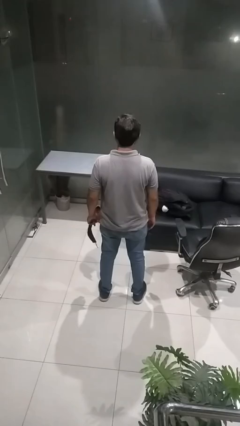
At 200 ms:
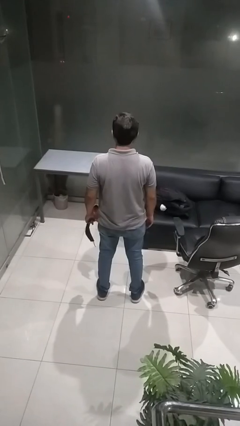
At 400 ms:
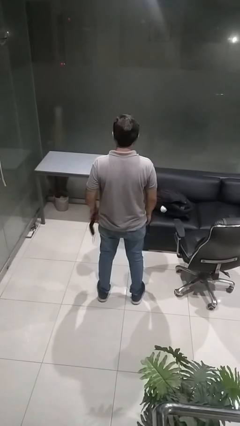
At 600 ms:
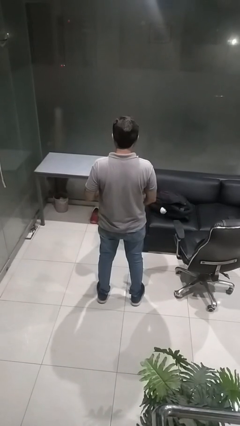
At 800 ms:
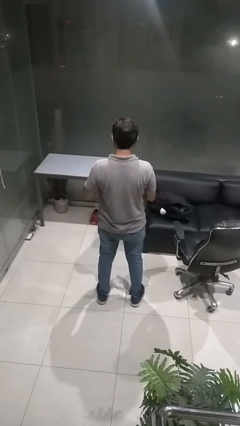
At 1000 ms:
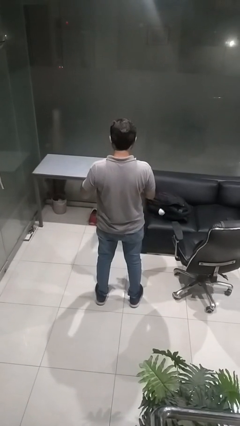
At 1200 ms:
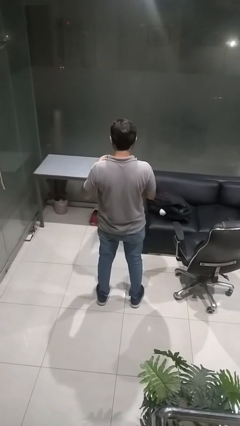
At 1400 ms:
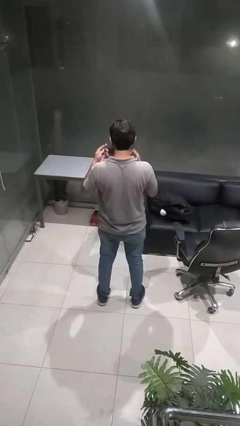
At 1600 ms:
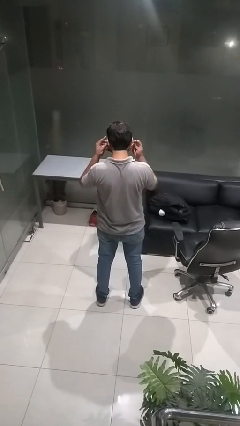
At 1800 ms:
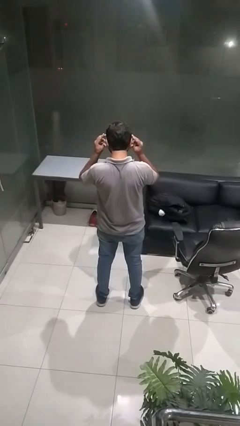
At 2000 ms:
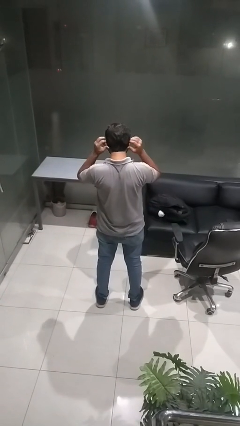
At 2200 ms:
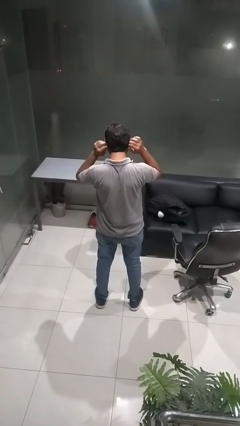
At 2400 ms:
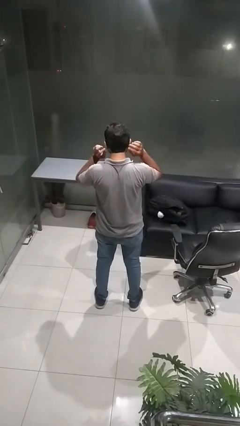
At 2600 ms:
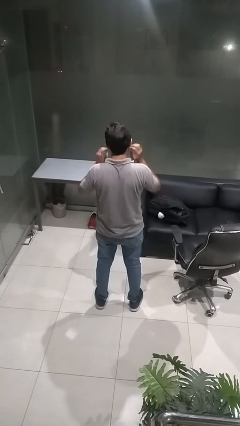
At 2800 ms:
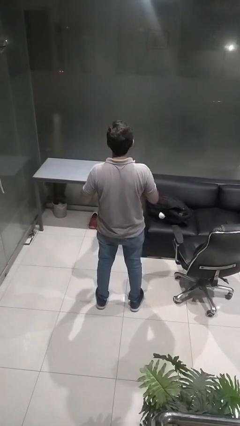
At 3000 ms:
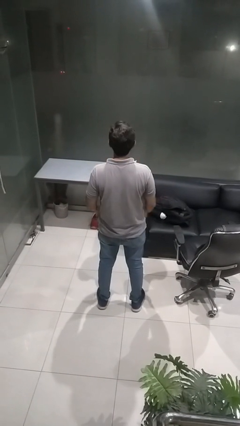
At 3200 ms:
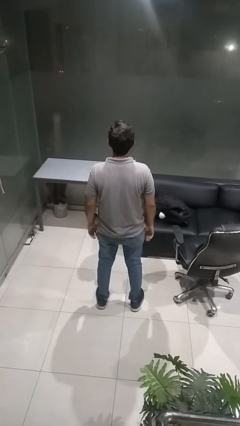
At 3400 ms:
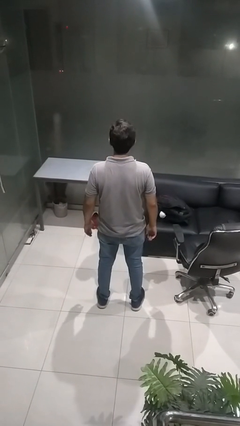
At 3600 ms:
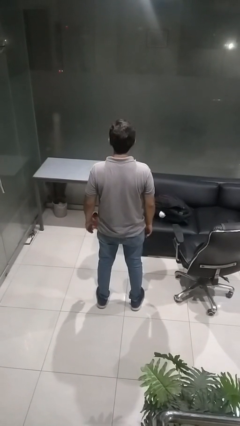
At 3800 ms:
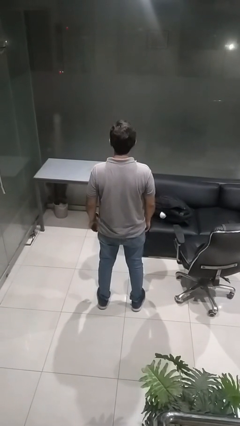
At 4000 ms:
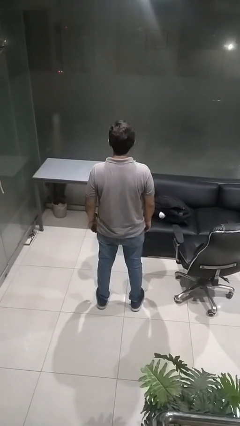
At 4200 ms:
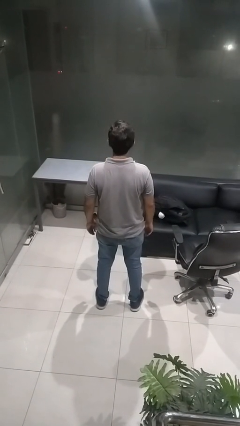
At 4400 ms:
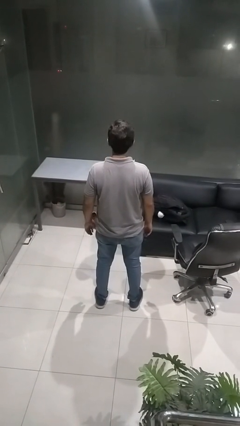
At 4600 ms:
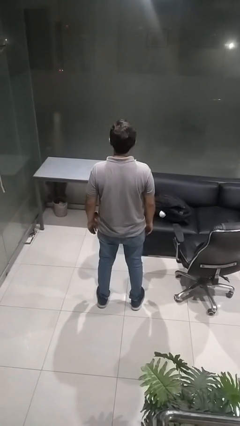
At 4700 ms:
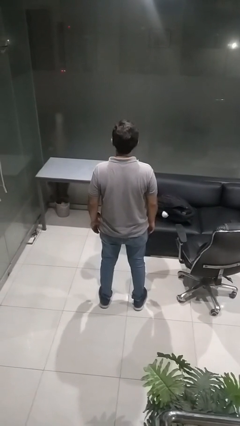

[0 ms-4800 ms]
person puts on facemask

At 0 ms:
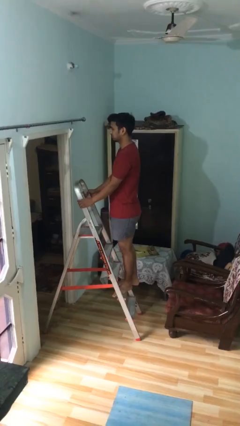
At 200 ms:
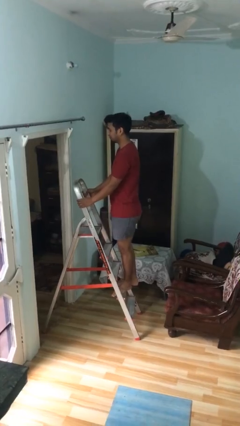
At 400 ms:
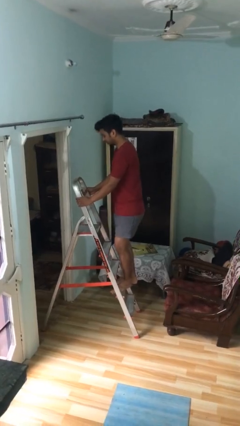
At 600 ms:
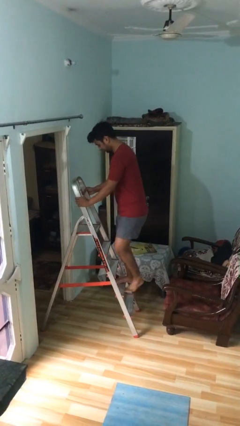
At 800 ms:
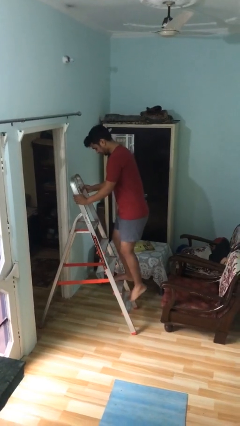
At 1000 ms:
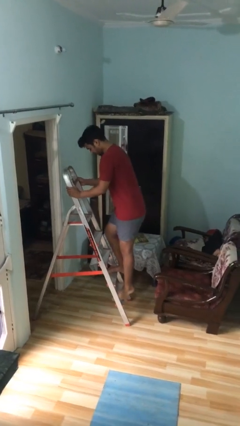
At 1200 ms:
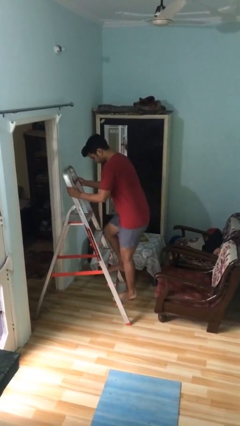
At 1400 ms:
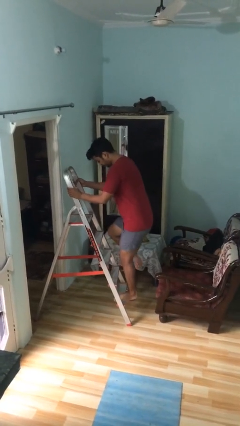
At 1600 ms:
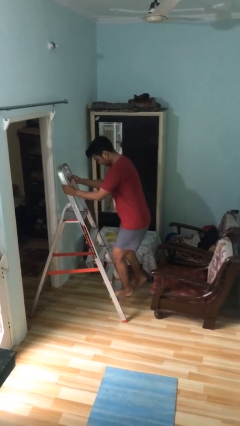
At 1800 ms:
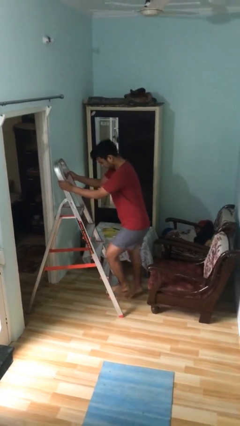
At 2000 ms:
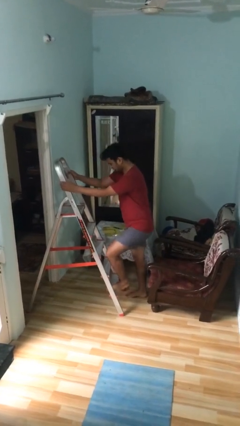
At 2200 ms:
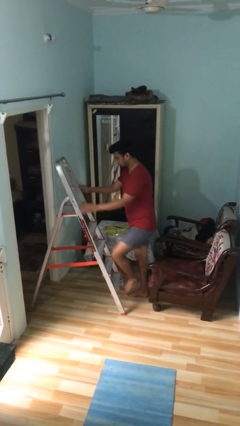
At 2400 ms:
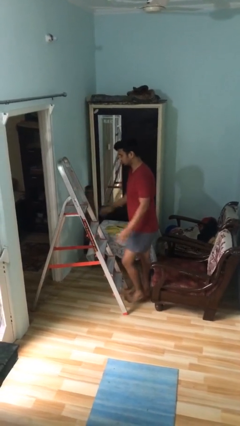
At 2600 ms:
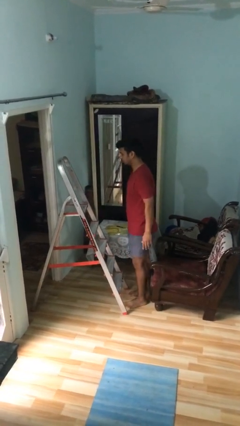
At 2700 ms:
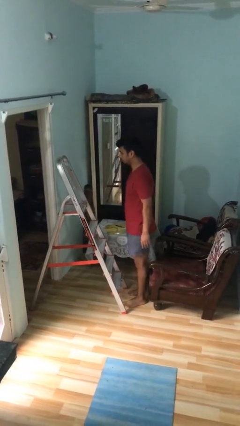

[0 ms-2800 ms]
person climbs down ladder

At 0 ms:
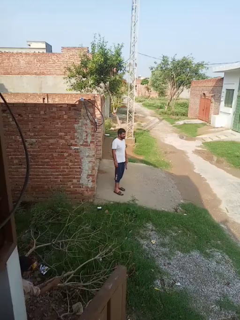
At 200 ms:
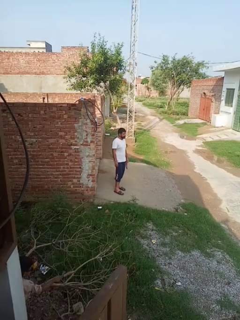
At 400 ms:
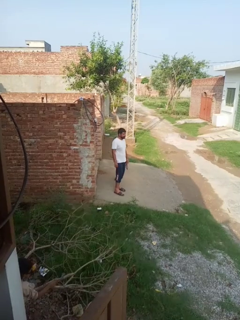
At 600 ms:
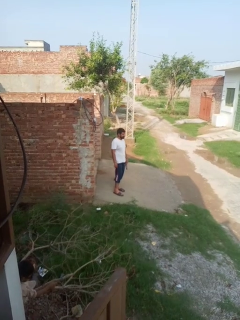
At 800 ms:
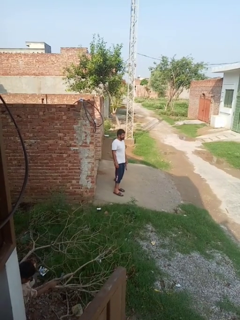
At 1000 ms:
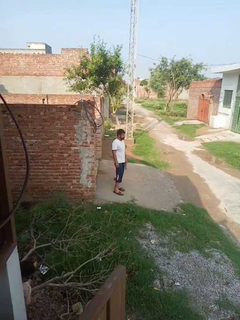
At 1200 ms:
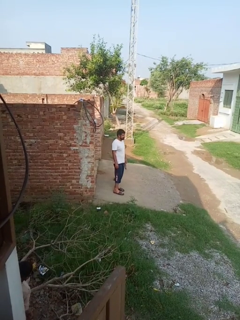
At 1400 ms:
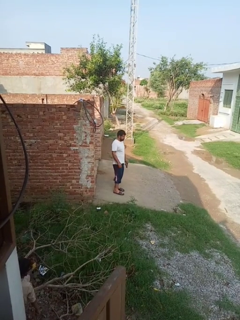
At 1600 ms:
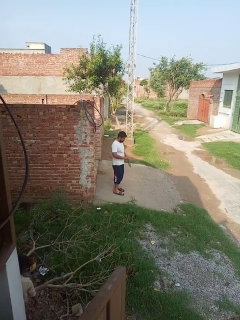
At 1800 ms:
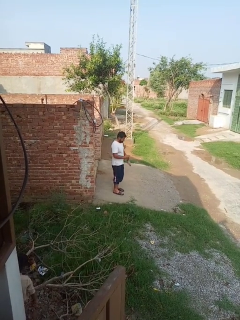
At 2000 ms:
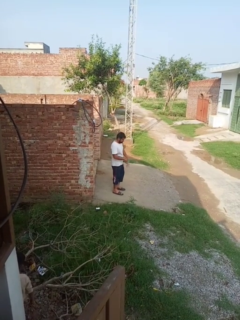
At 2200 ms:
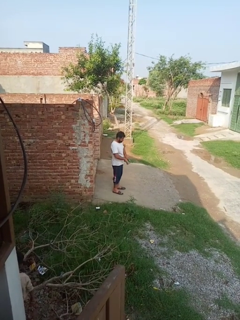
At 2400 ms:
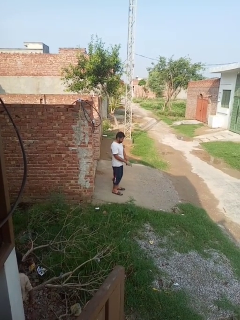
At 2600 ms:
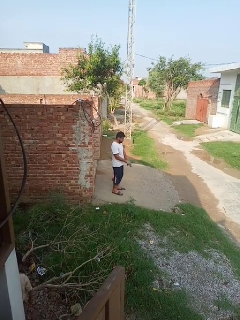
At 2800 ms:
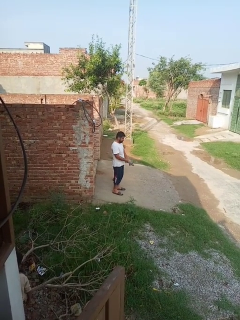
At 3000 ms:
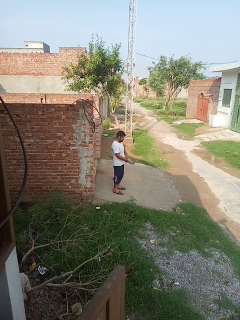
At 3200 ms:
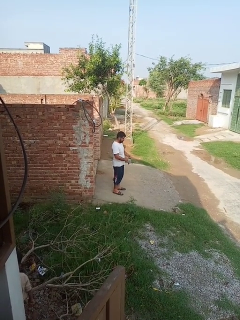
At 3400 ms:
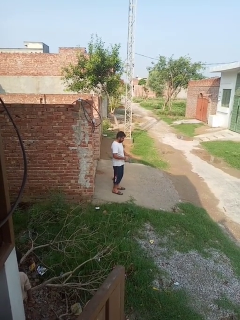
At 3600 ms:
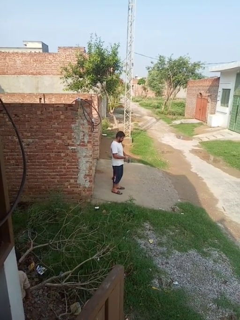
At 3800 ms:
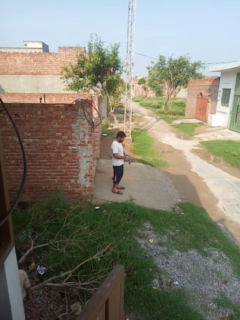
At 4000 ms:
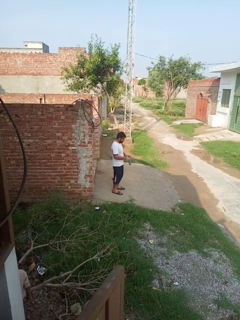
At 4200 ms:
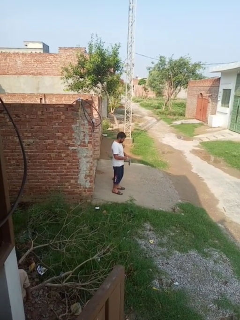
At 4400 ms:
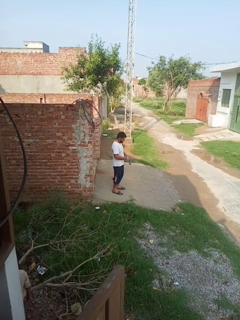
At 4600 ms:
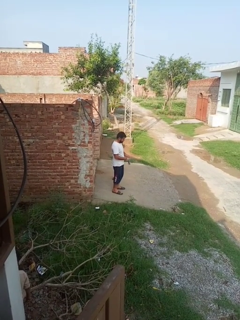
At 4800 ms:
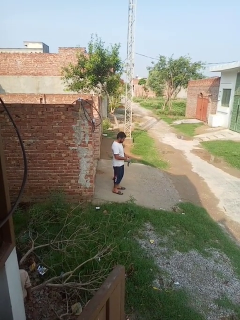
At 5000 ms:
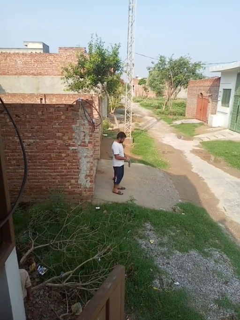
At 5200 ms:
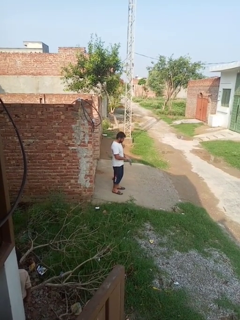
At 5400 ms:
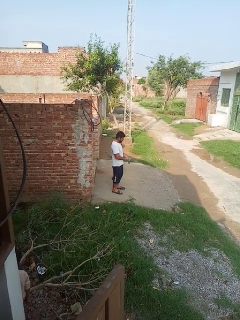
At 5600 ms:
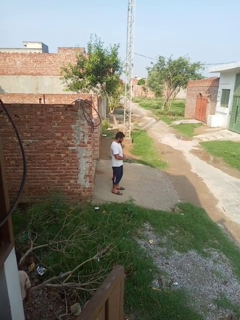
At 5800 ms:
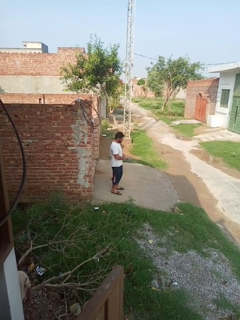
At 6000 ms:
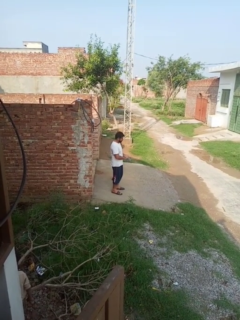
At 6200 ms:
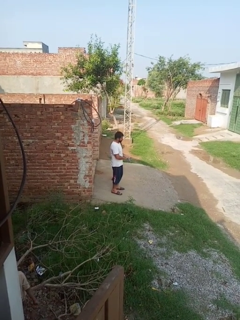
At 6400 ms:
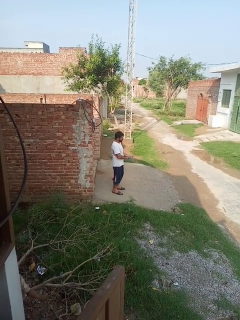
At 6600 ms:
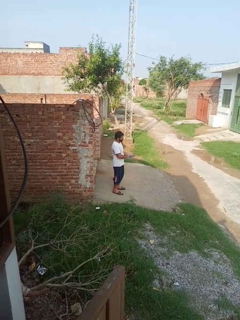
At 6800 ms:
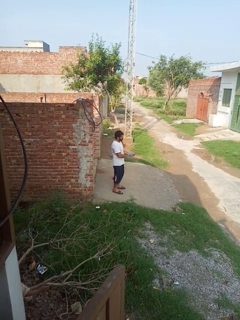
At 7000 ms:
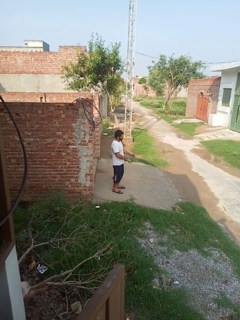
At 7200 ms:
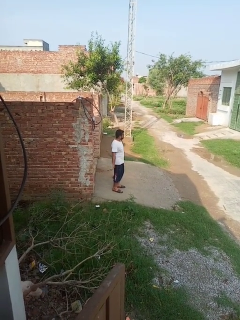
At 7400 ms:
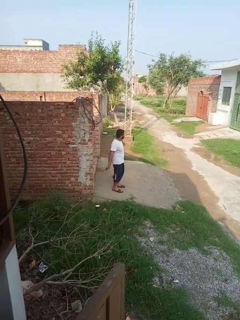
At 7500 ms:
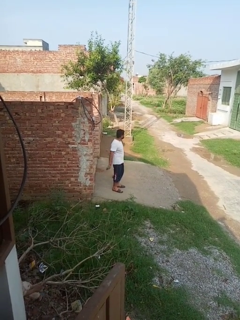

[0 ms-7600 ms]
person puts on gloves

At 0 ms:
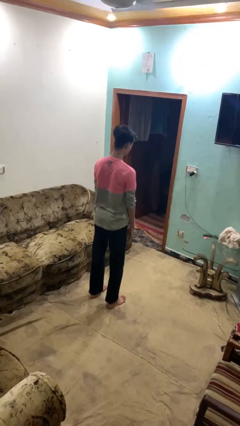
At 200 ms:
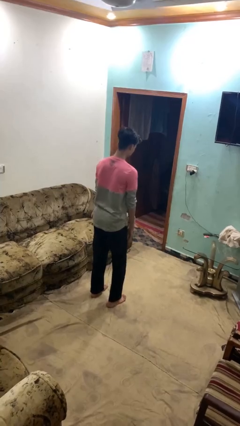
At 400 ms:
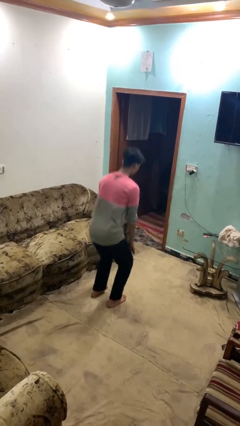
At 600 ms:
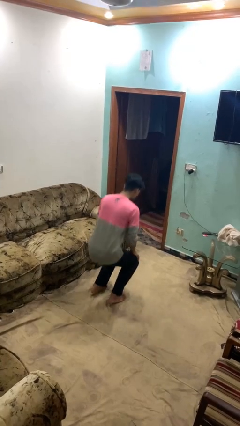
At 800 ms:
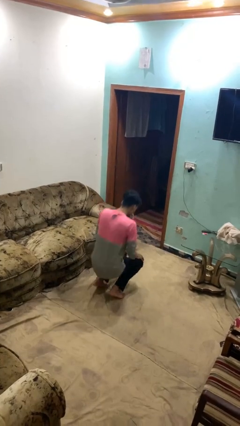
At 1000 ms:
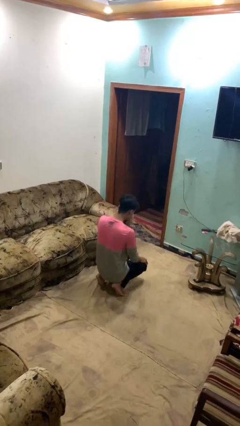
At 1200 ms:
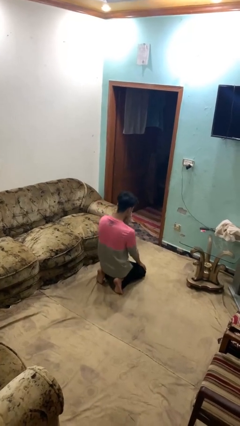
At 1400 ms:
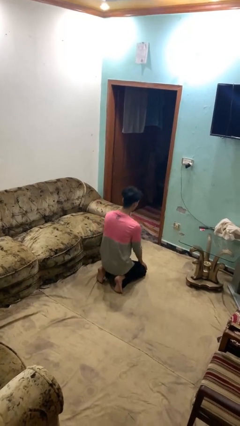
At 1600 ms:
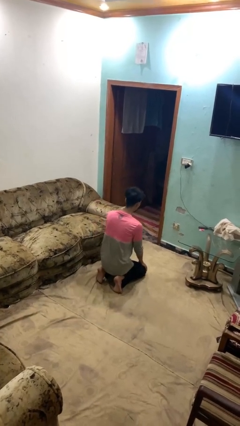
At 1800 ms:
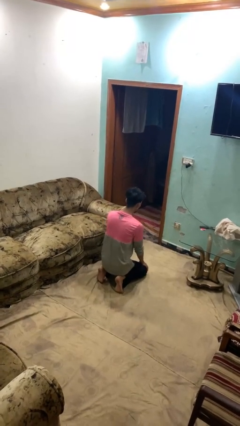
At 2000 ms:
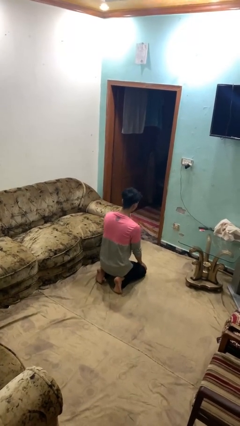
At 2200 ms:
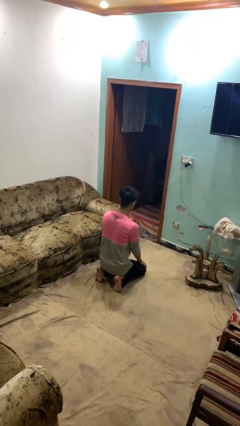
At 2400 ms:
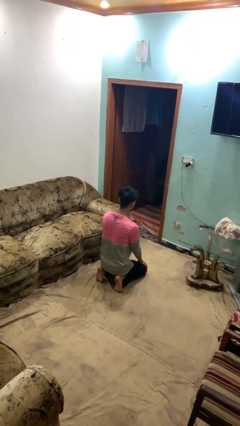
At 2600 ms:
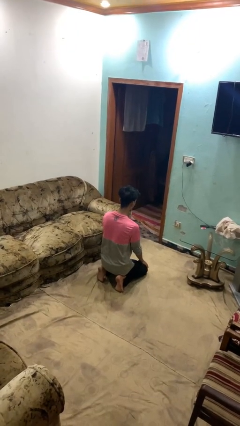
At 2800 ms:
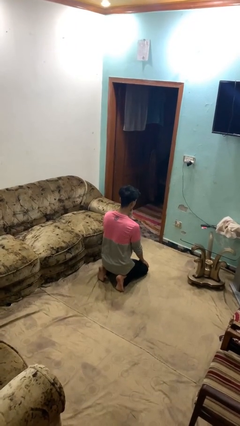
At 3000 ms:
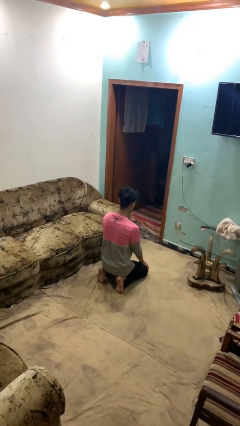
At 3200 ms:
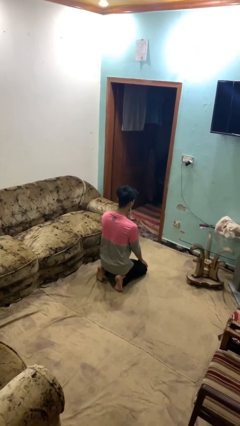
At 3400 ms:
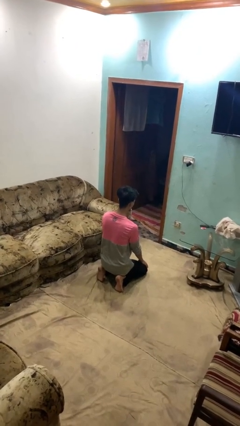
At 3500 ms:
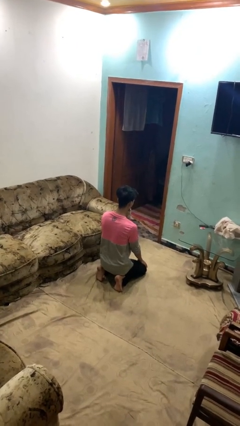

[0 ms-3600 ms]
person kneels

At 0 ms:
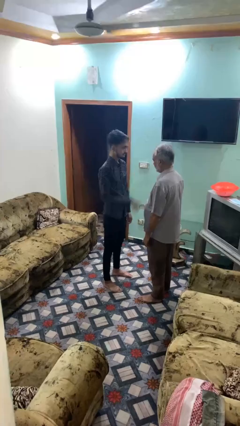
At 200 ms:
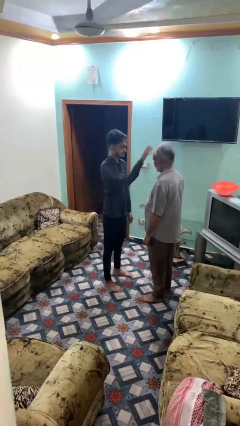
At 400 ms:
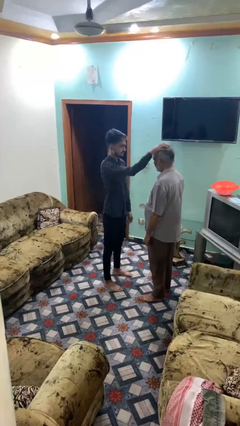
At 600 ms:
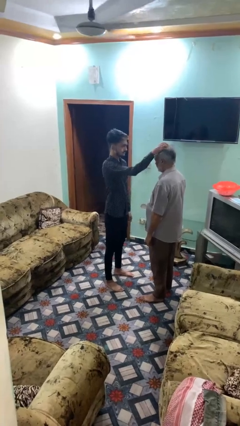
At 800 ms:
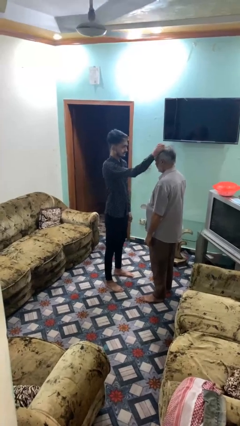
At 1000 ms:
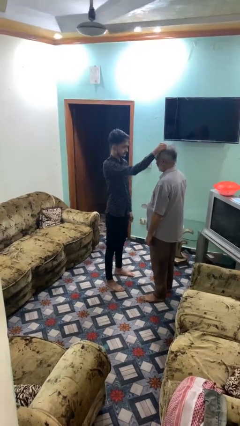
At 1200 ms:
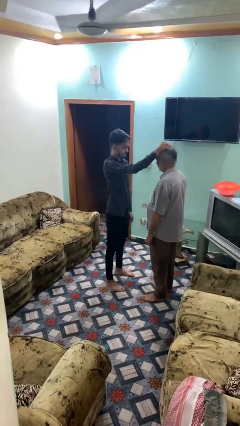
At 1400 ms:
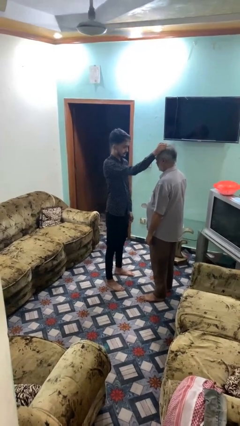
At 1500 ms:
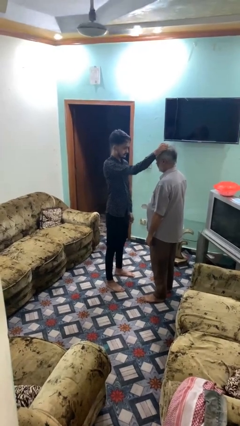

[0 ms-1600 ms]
person grabs person by hair